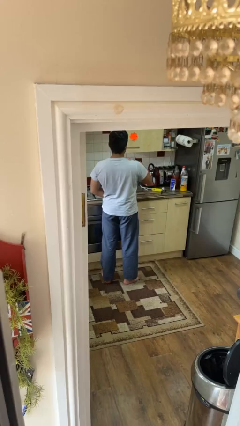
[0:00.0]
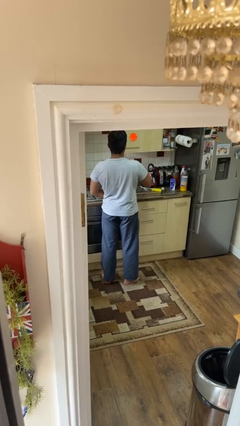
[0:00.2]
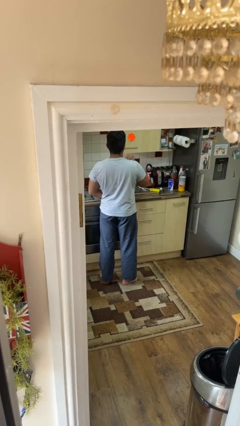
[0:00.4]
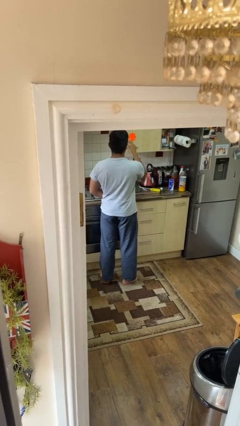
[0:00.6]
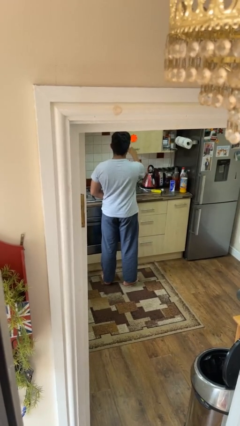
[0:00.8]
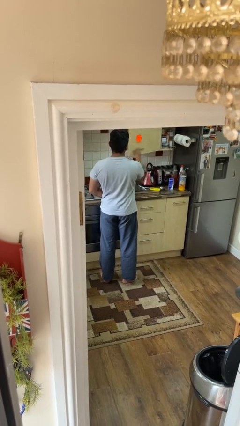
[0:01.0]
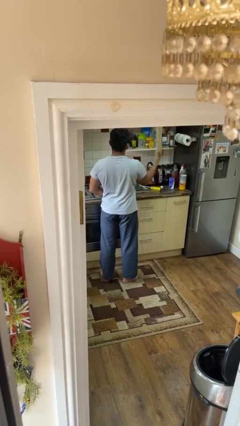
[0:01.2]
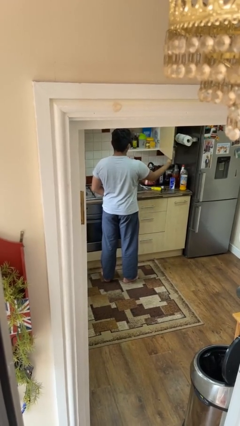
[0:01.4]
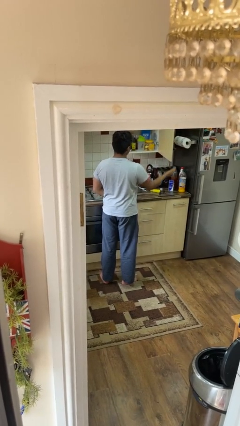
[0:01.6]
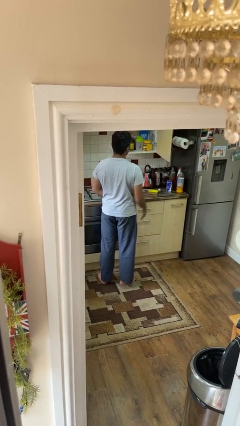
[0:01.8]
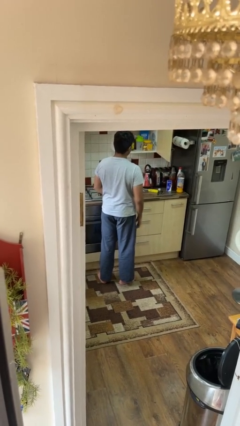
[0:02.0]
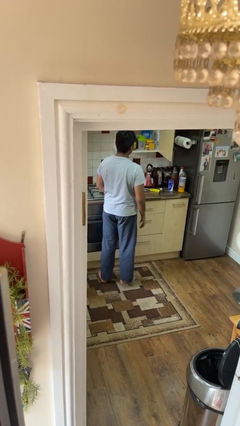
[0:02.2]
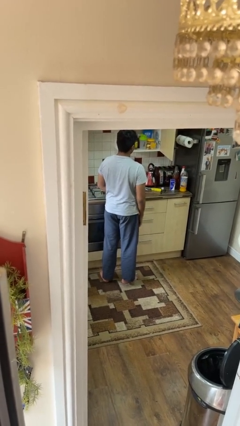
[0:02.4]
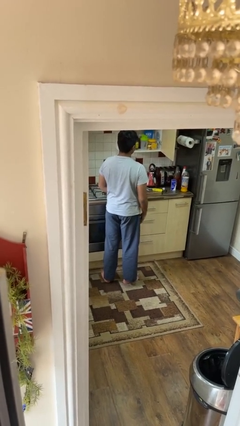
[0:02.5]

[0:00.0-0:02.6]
person opens cabinet

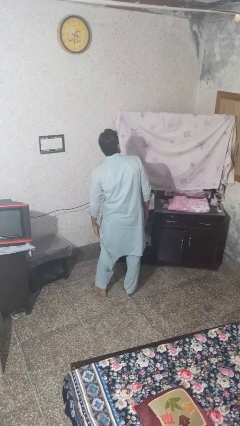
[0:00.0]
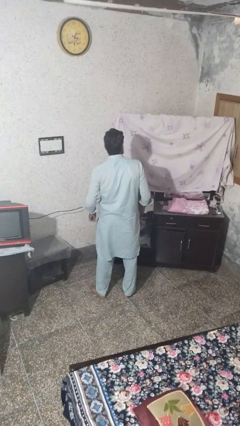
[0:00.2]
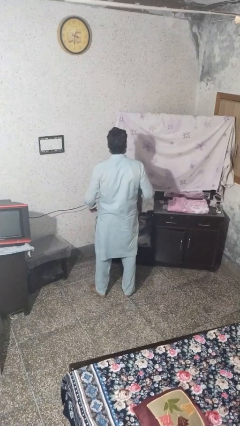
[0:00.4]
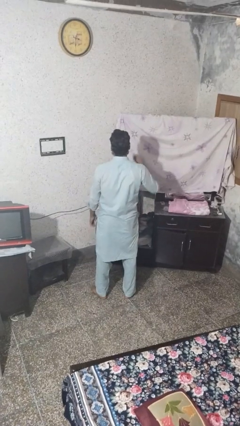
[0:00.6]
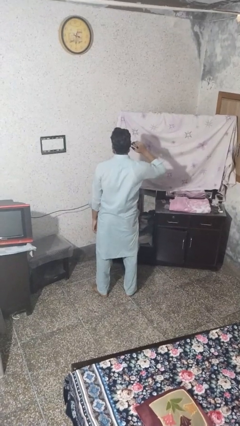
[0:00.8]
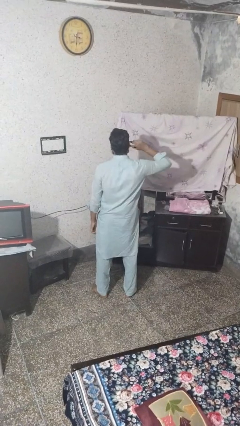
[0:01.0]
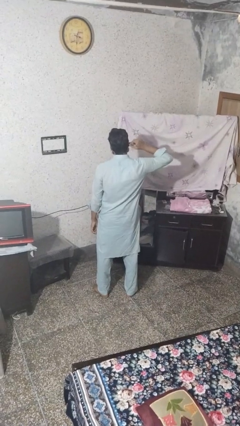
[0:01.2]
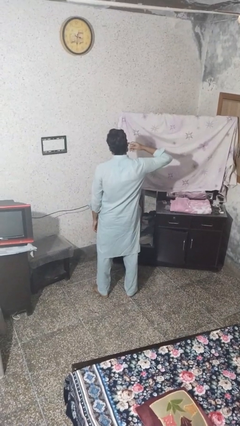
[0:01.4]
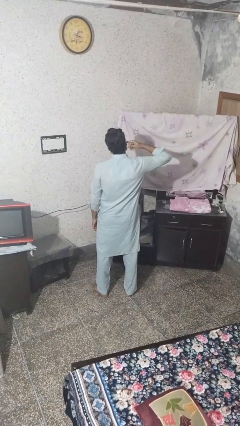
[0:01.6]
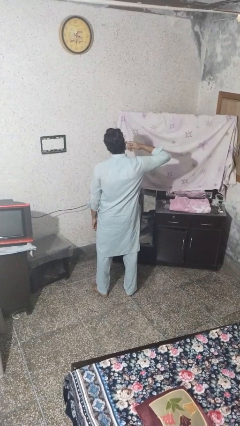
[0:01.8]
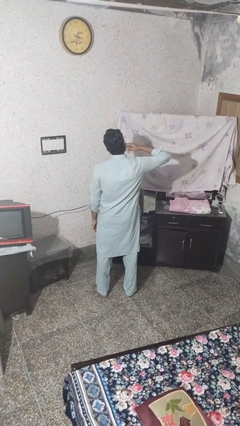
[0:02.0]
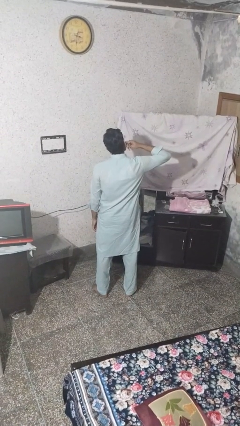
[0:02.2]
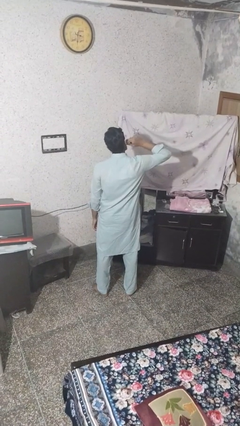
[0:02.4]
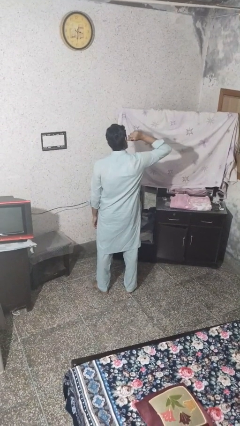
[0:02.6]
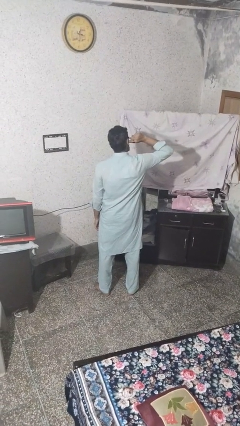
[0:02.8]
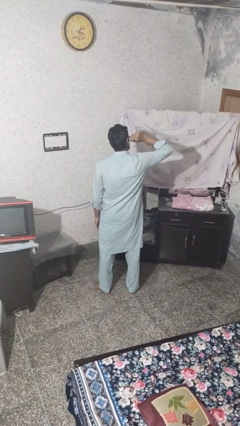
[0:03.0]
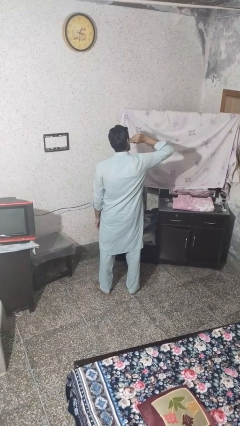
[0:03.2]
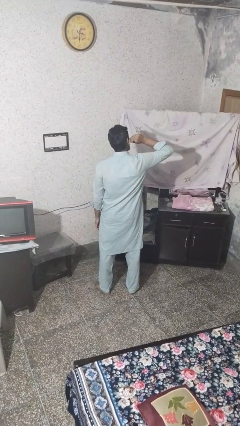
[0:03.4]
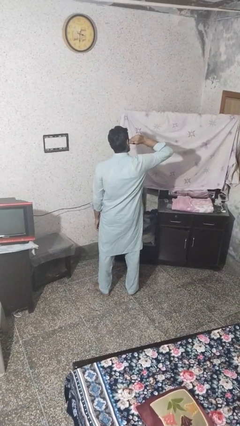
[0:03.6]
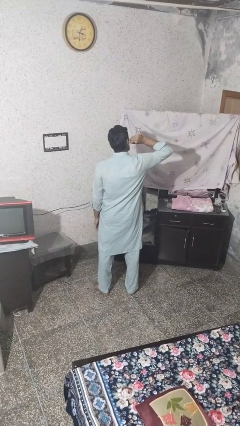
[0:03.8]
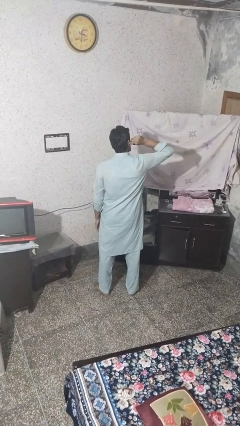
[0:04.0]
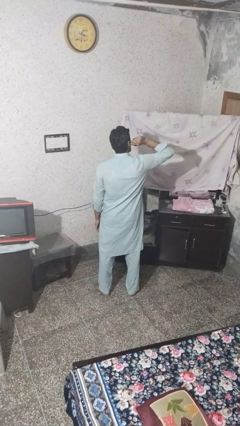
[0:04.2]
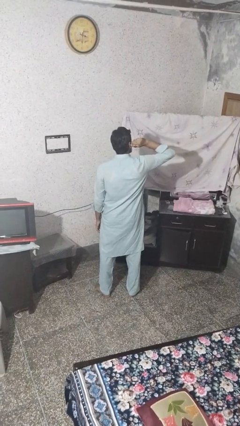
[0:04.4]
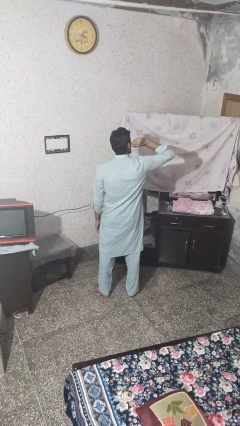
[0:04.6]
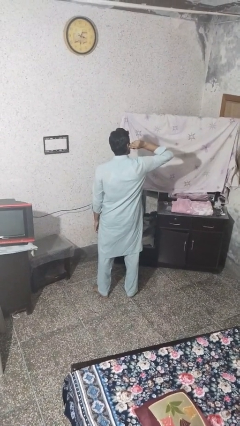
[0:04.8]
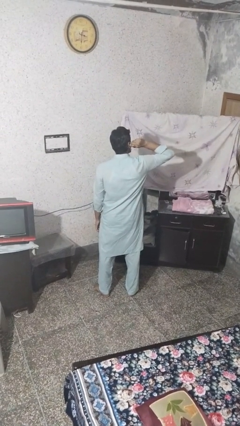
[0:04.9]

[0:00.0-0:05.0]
person puts fingers in ear

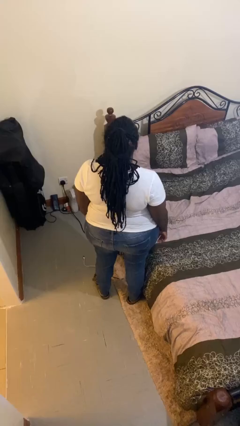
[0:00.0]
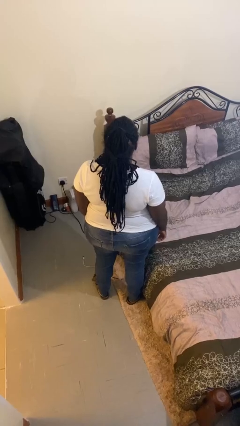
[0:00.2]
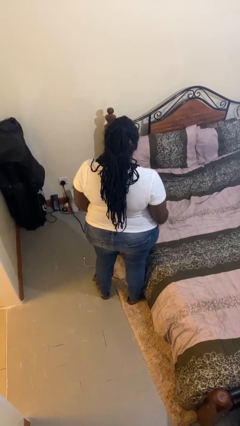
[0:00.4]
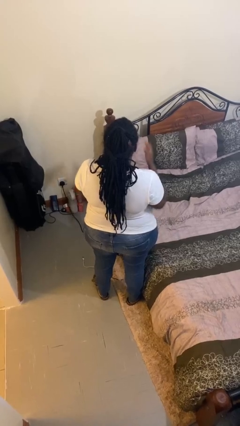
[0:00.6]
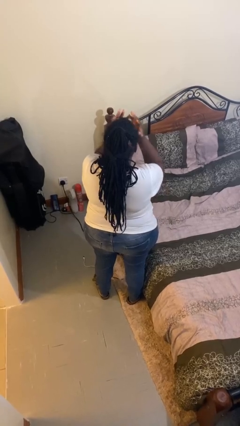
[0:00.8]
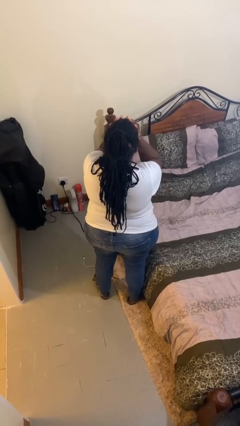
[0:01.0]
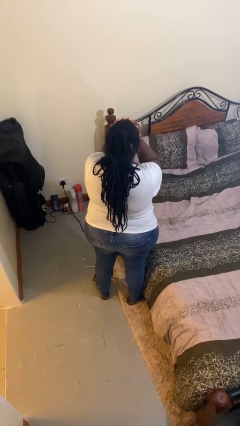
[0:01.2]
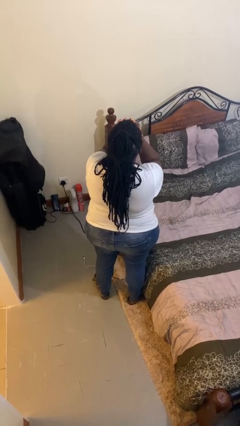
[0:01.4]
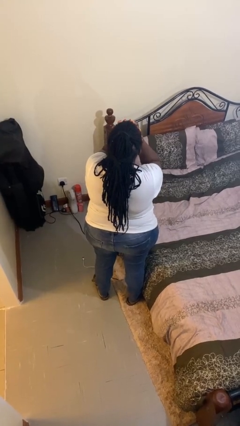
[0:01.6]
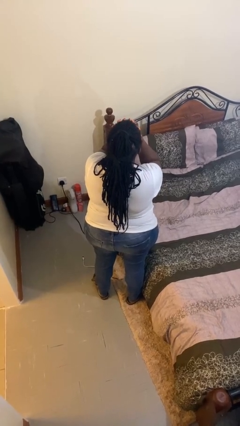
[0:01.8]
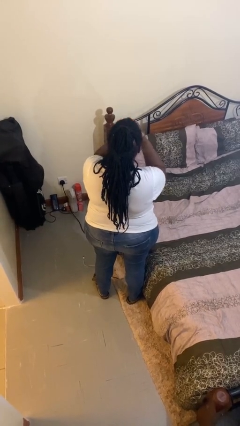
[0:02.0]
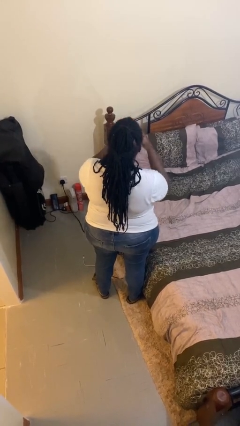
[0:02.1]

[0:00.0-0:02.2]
person covers face with hands

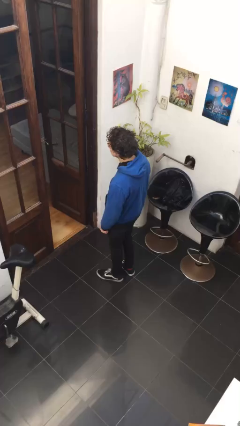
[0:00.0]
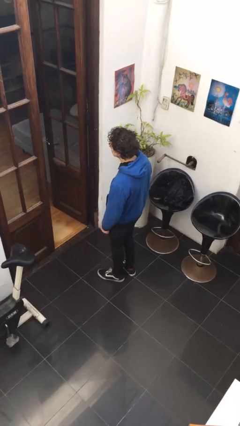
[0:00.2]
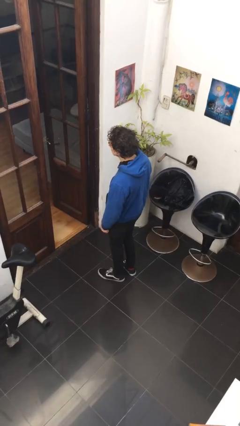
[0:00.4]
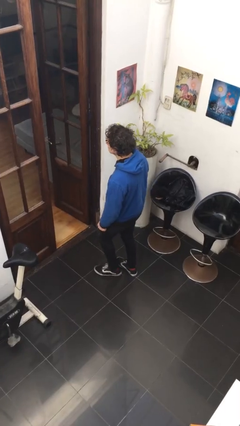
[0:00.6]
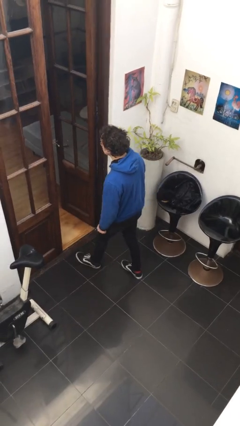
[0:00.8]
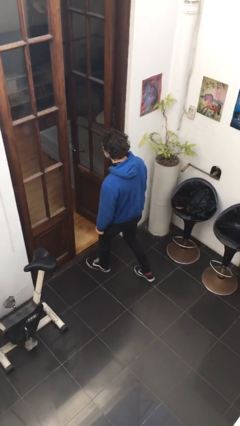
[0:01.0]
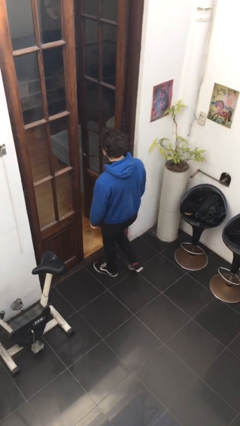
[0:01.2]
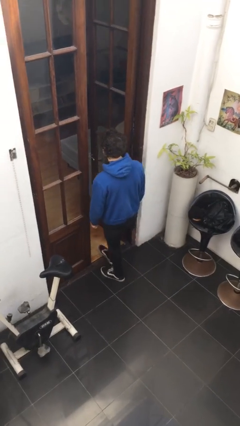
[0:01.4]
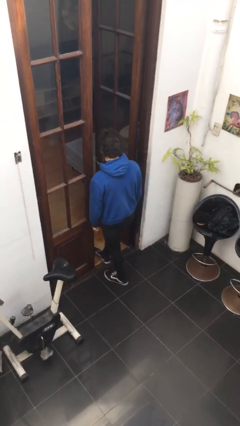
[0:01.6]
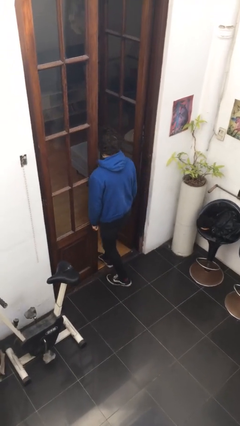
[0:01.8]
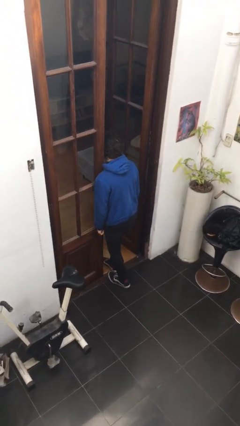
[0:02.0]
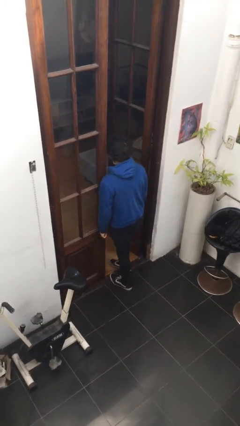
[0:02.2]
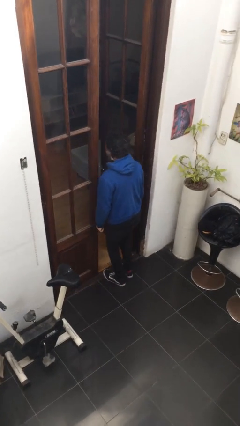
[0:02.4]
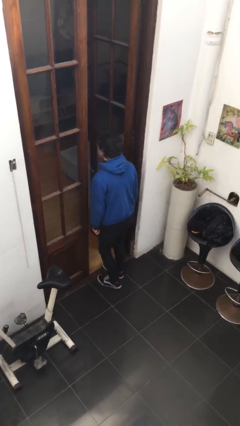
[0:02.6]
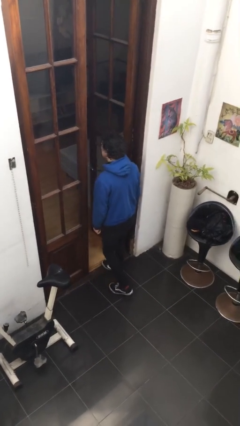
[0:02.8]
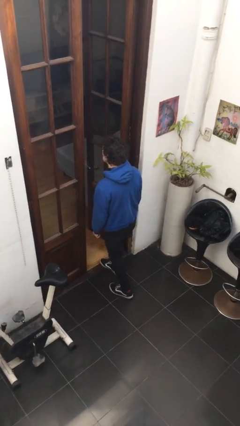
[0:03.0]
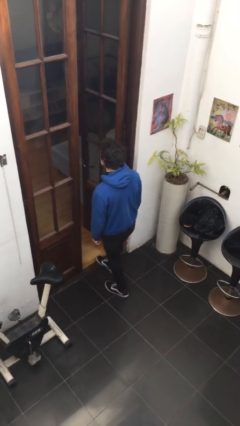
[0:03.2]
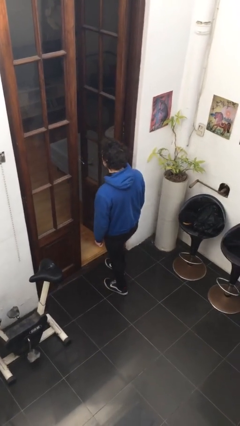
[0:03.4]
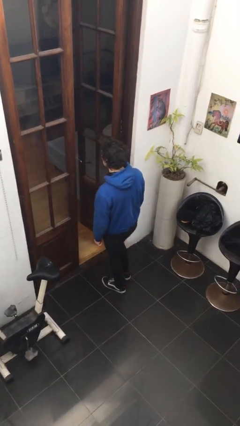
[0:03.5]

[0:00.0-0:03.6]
person bumps into wall

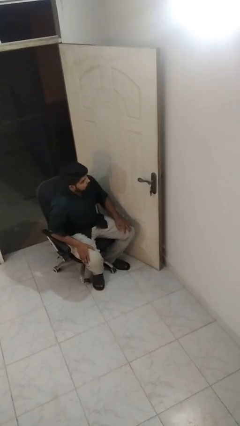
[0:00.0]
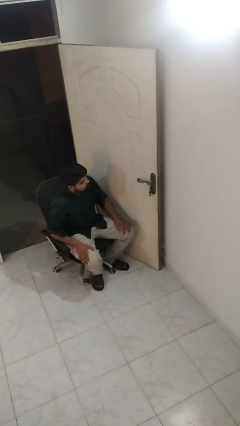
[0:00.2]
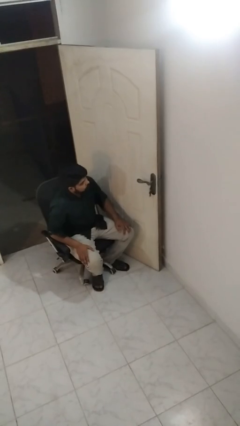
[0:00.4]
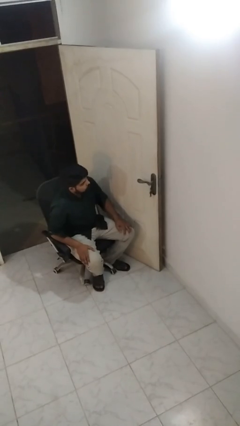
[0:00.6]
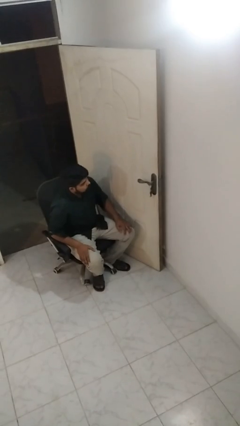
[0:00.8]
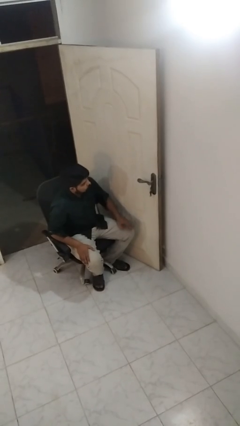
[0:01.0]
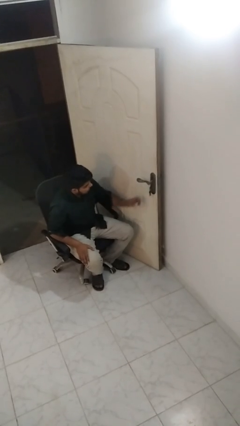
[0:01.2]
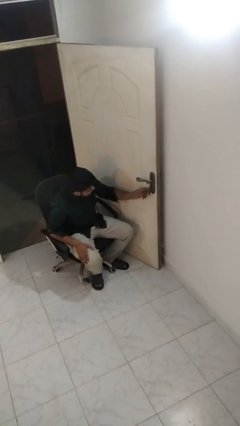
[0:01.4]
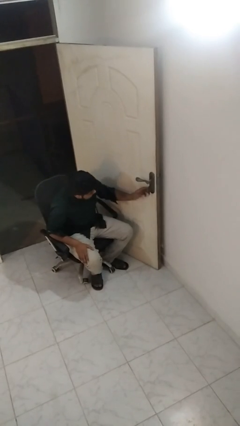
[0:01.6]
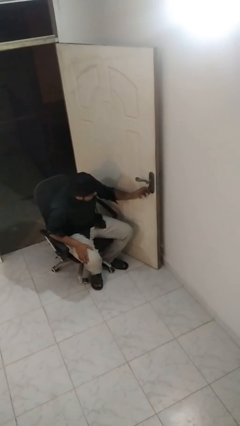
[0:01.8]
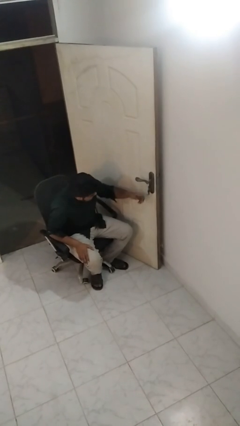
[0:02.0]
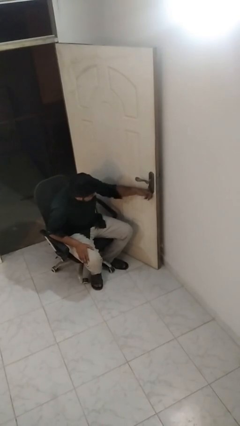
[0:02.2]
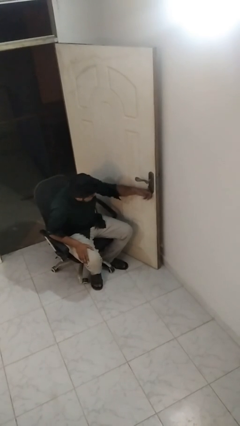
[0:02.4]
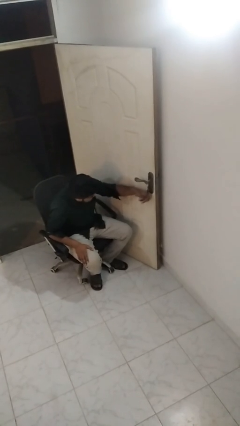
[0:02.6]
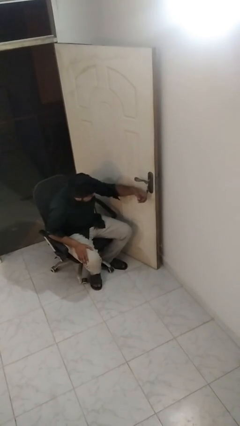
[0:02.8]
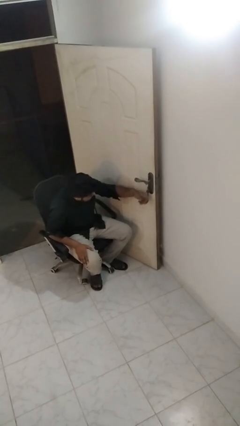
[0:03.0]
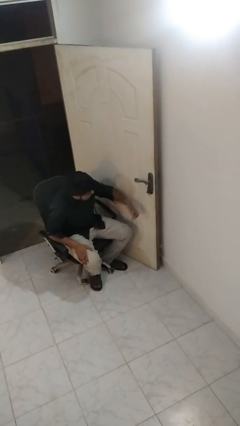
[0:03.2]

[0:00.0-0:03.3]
person taps object with finger

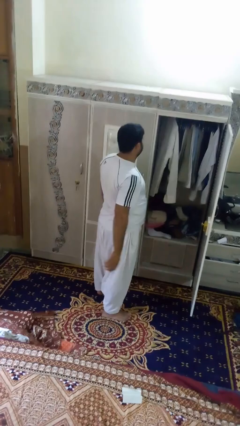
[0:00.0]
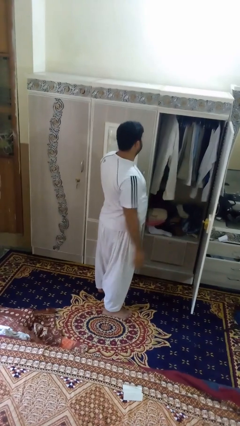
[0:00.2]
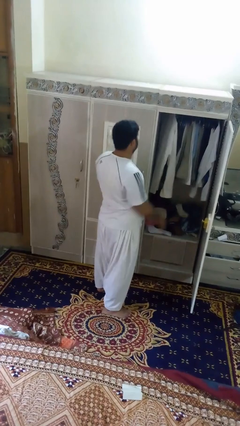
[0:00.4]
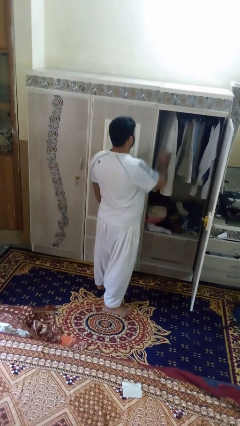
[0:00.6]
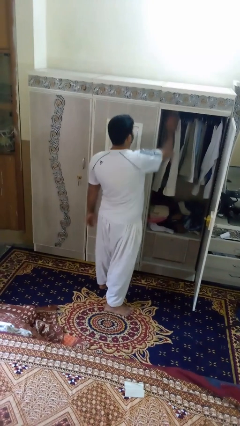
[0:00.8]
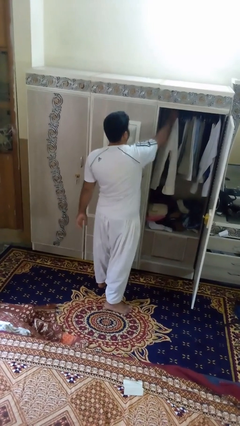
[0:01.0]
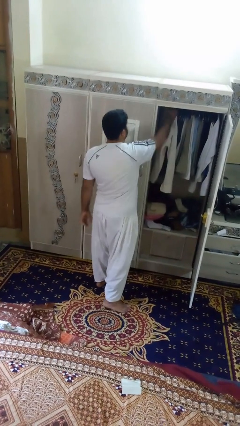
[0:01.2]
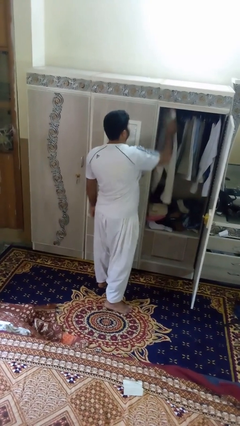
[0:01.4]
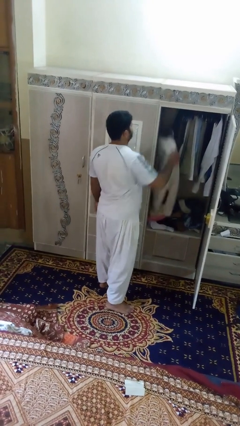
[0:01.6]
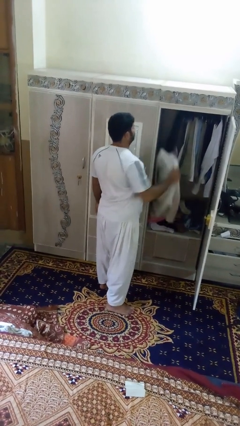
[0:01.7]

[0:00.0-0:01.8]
person takes clothes from closet
